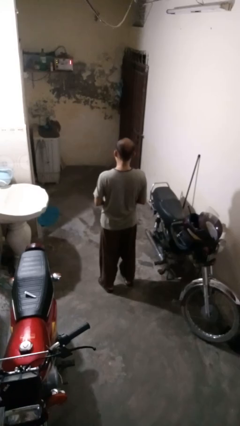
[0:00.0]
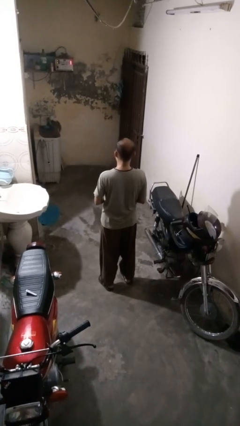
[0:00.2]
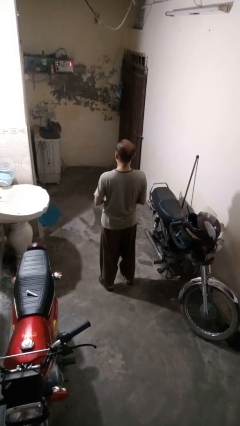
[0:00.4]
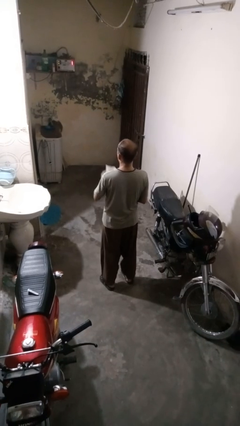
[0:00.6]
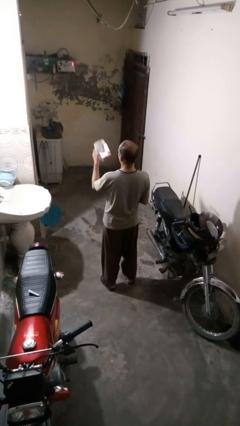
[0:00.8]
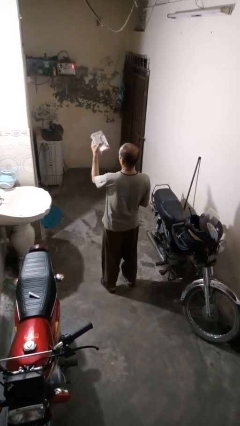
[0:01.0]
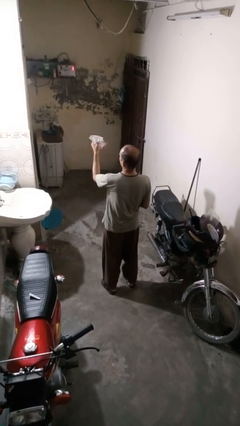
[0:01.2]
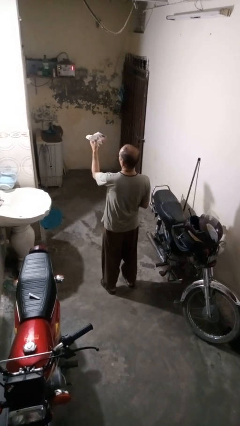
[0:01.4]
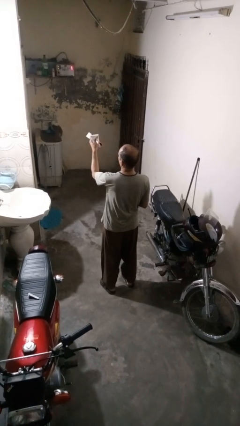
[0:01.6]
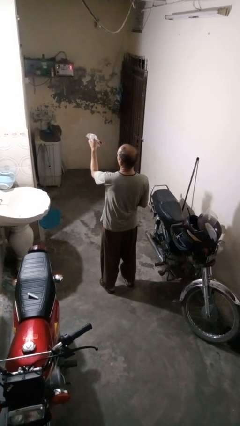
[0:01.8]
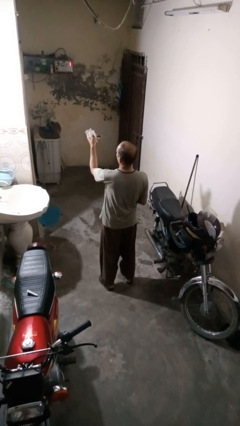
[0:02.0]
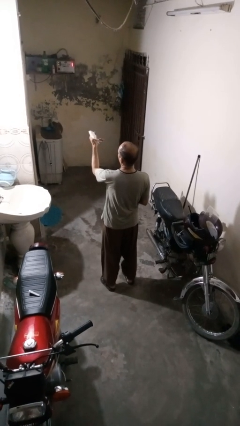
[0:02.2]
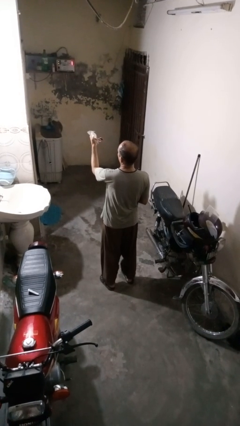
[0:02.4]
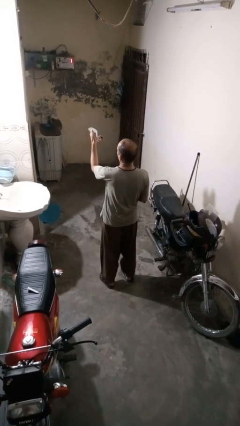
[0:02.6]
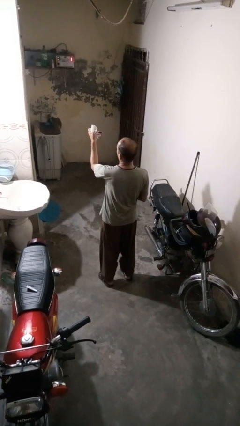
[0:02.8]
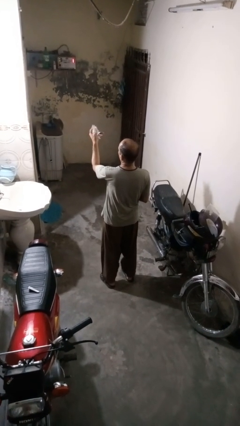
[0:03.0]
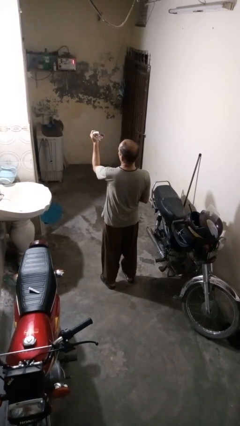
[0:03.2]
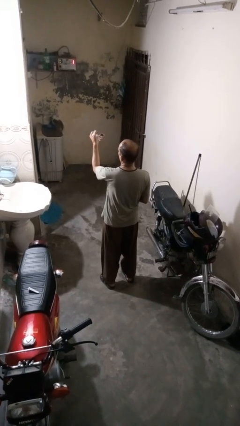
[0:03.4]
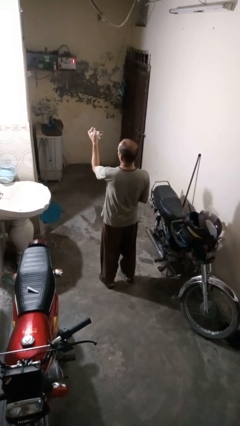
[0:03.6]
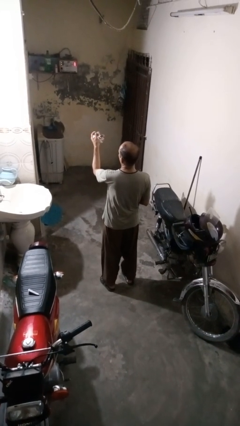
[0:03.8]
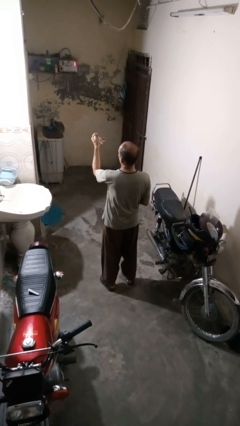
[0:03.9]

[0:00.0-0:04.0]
person crumples paper

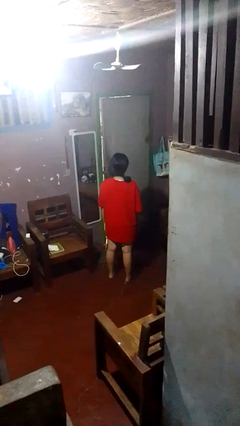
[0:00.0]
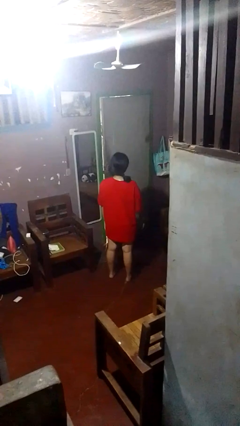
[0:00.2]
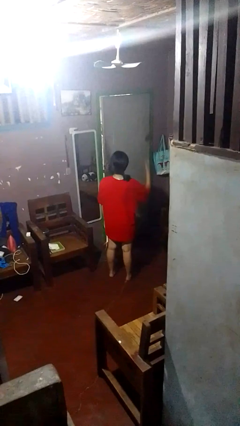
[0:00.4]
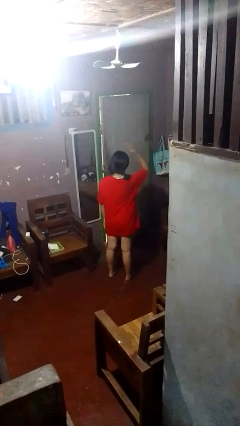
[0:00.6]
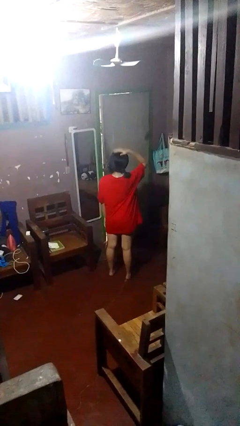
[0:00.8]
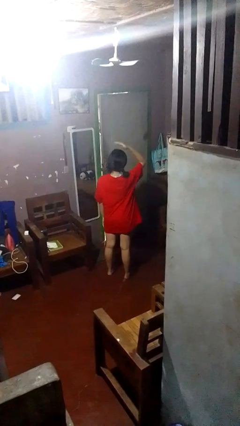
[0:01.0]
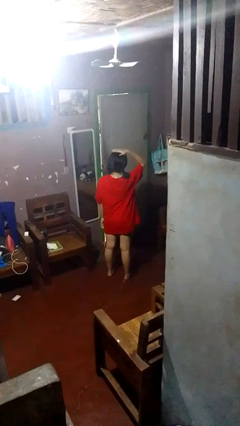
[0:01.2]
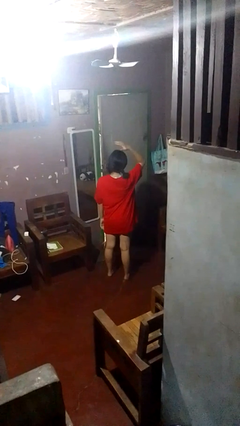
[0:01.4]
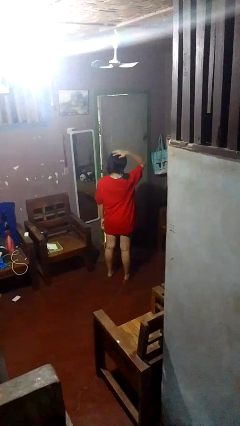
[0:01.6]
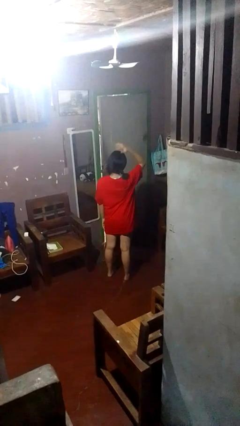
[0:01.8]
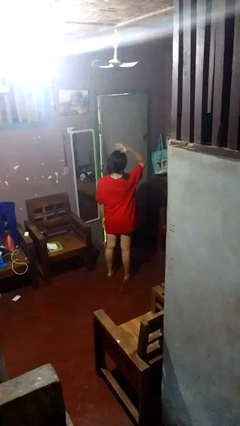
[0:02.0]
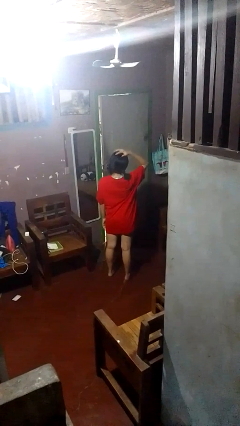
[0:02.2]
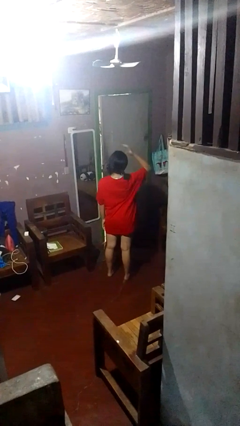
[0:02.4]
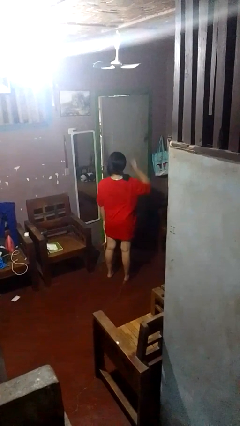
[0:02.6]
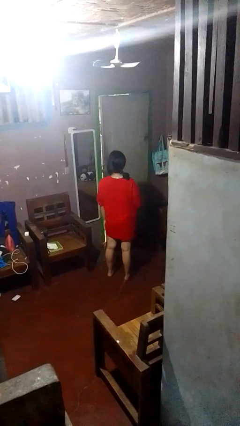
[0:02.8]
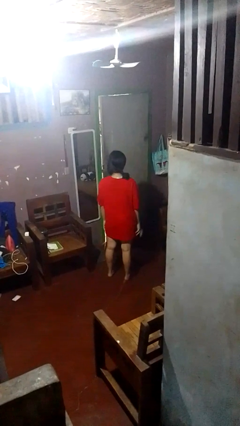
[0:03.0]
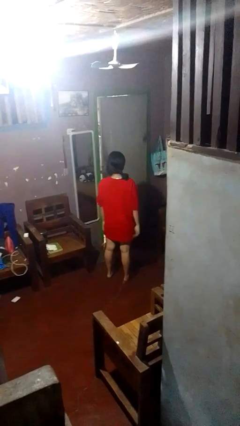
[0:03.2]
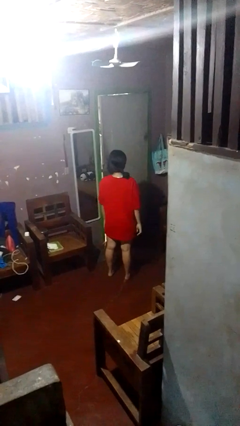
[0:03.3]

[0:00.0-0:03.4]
person pats head

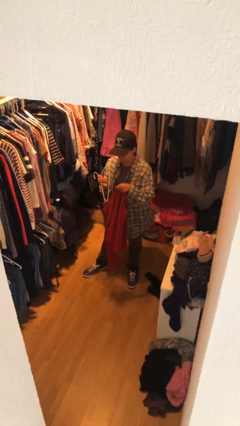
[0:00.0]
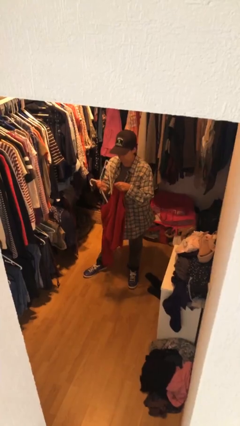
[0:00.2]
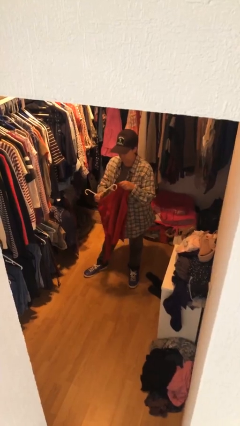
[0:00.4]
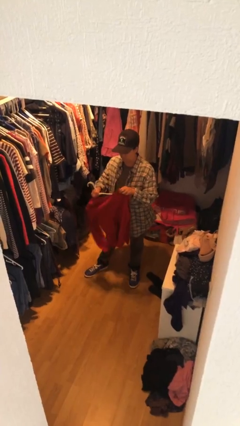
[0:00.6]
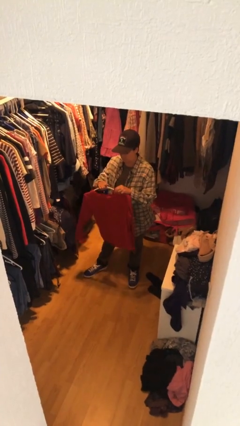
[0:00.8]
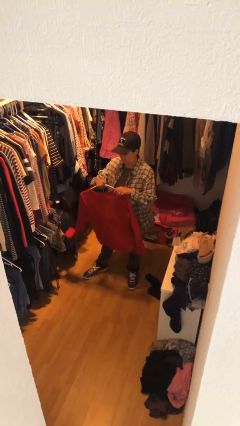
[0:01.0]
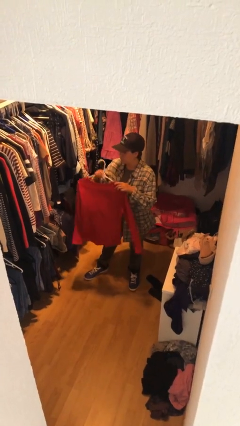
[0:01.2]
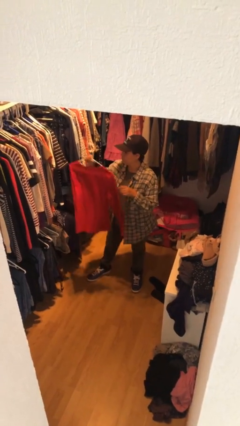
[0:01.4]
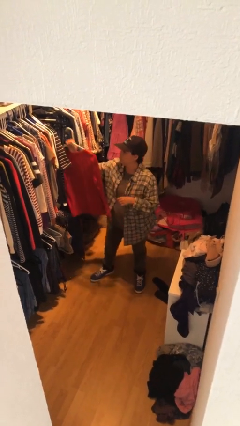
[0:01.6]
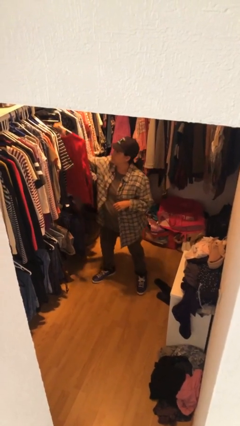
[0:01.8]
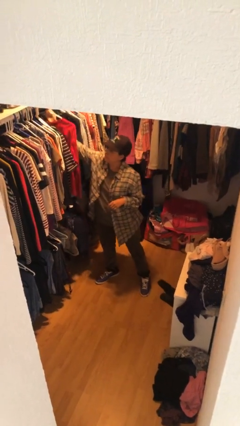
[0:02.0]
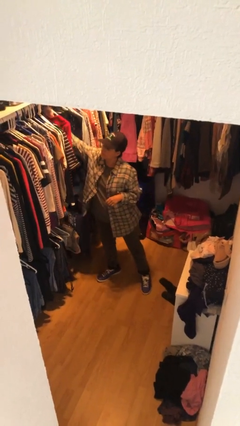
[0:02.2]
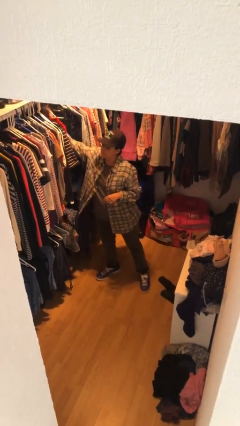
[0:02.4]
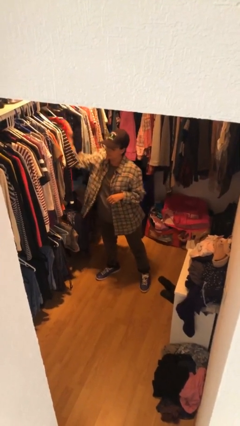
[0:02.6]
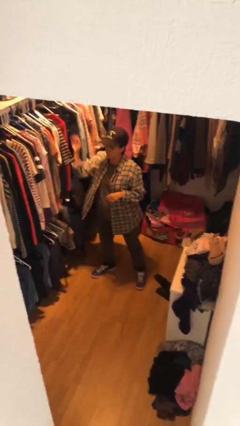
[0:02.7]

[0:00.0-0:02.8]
person puts clothes into closet

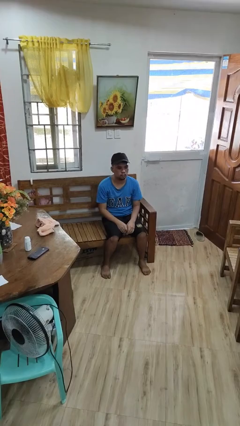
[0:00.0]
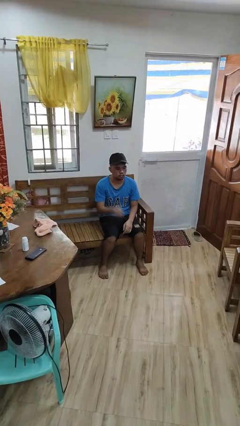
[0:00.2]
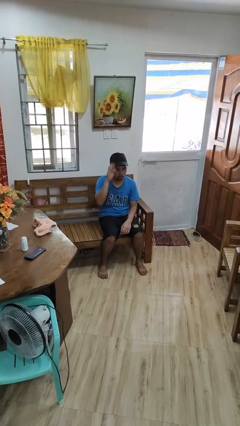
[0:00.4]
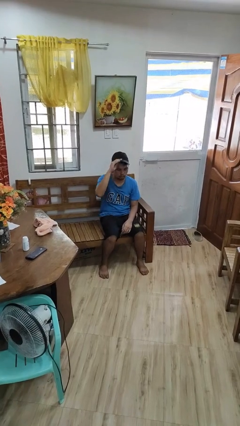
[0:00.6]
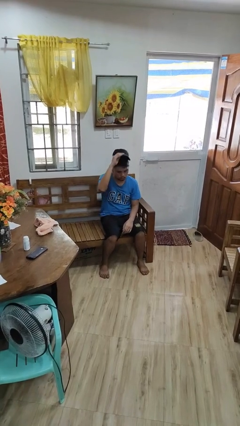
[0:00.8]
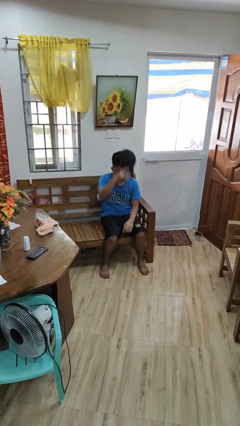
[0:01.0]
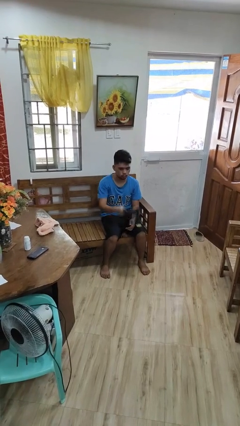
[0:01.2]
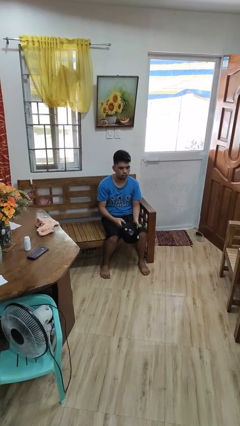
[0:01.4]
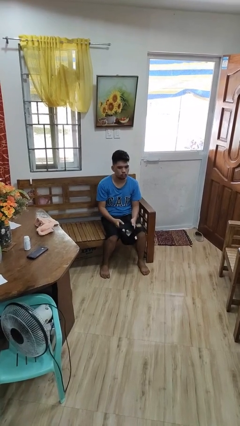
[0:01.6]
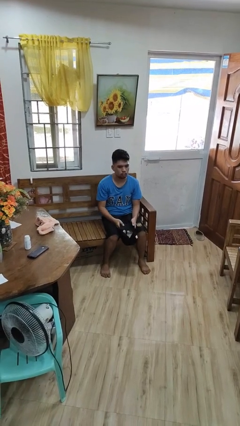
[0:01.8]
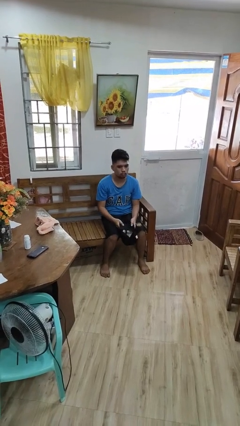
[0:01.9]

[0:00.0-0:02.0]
person takes off hat

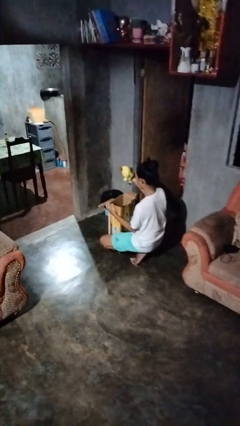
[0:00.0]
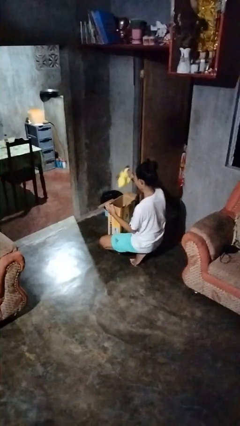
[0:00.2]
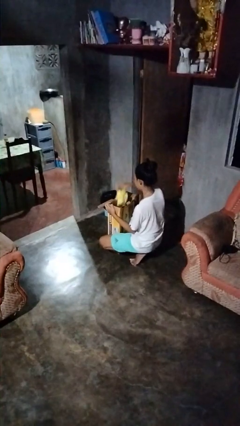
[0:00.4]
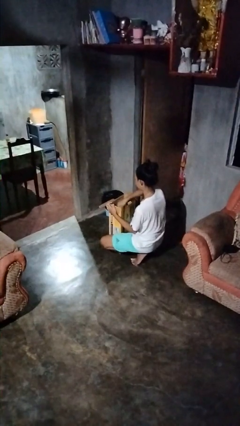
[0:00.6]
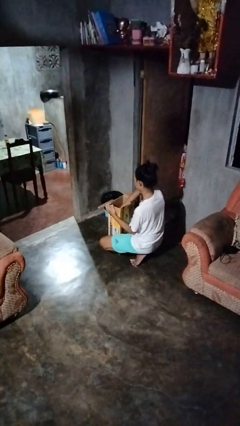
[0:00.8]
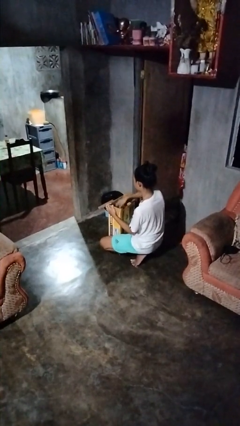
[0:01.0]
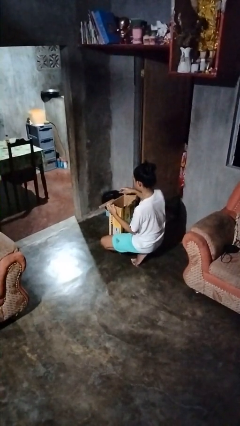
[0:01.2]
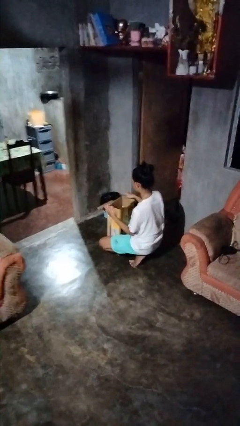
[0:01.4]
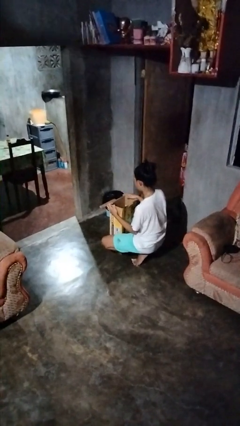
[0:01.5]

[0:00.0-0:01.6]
person puts object into box

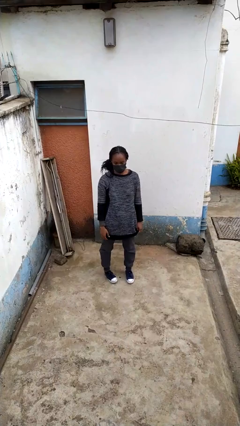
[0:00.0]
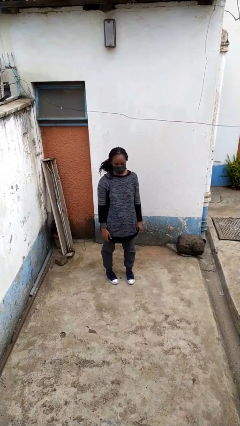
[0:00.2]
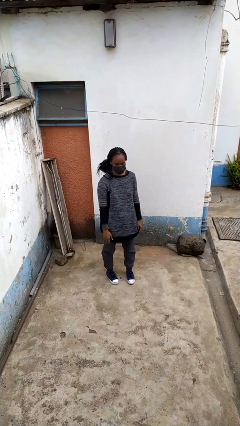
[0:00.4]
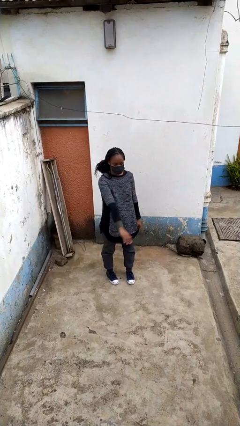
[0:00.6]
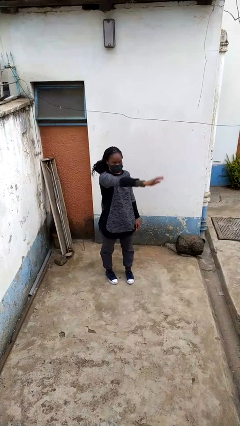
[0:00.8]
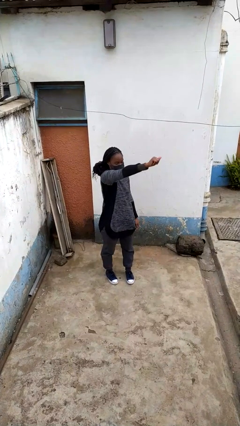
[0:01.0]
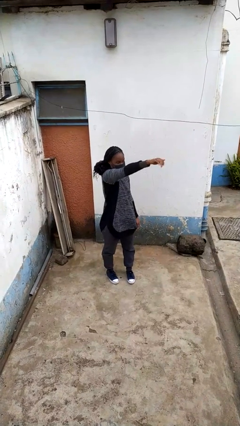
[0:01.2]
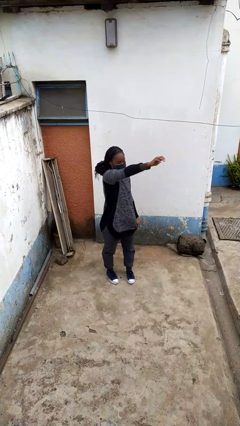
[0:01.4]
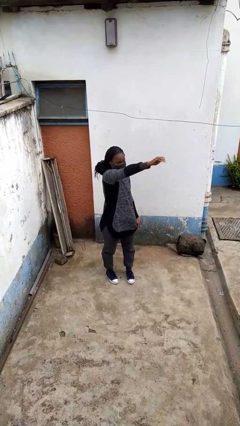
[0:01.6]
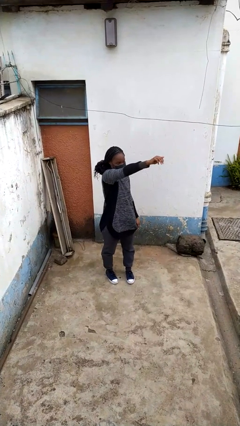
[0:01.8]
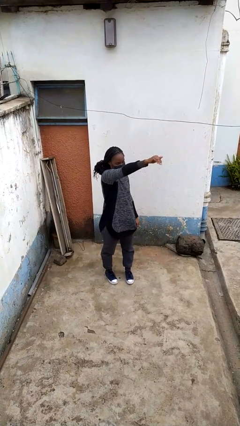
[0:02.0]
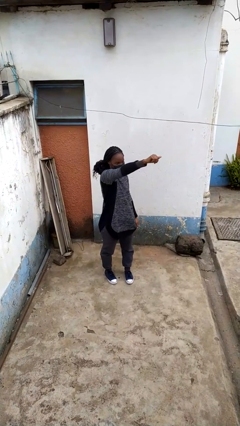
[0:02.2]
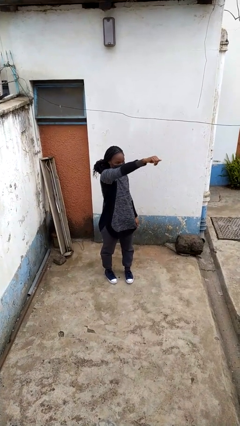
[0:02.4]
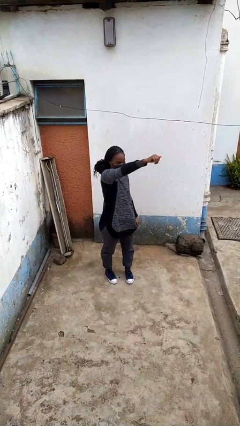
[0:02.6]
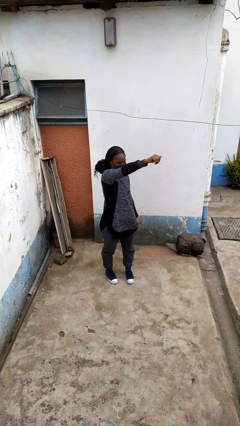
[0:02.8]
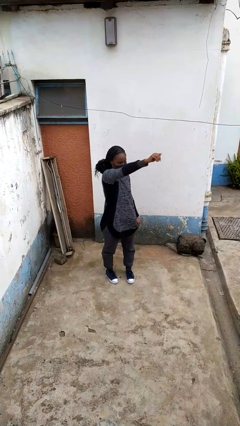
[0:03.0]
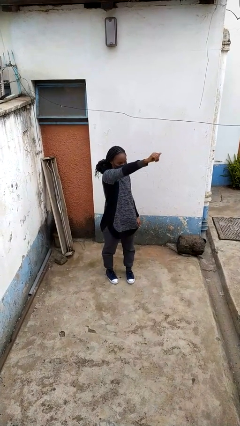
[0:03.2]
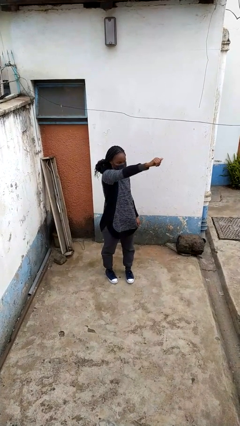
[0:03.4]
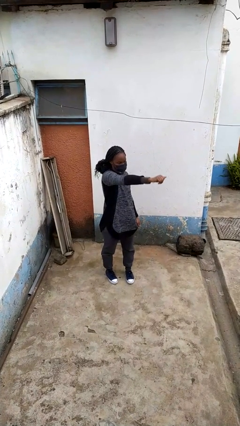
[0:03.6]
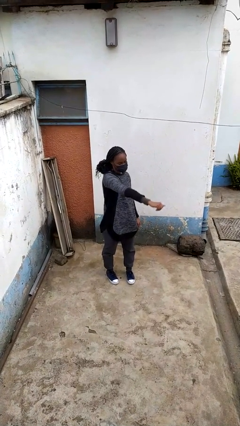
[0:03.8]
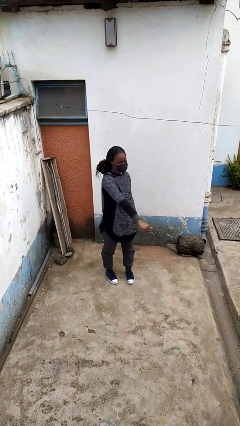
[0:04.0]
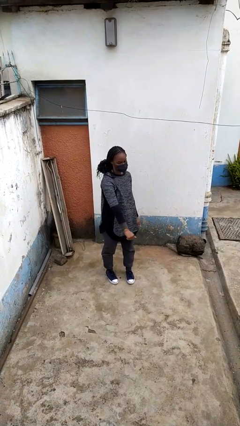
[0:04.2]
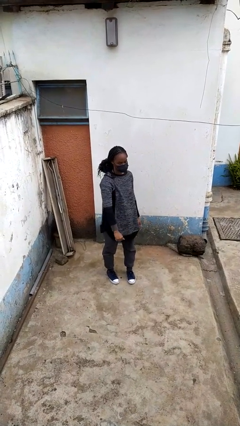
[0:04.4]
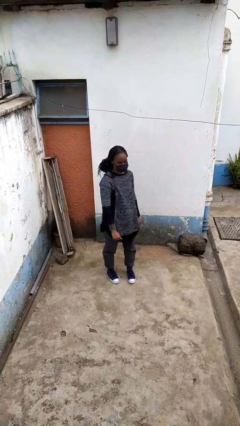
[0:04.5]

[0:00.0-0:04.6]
person gestures come here
